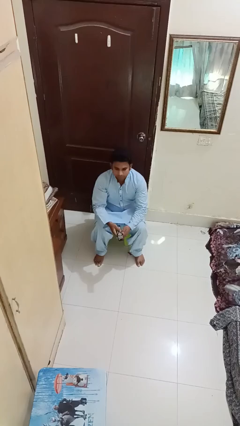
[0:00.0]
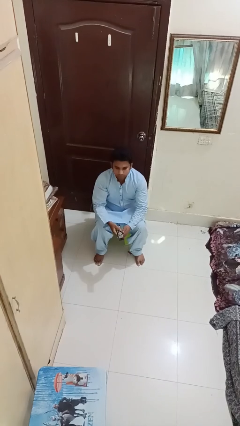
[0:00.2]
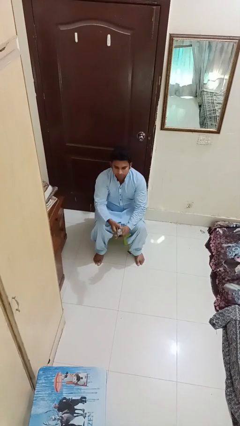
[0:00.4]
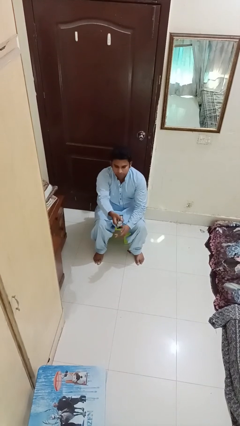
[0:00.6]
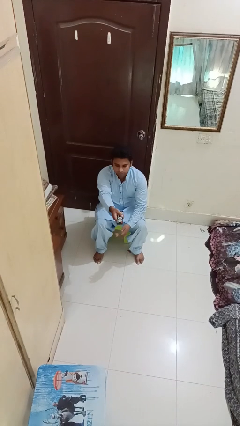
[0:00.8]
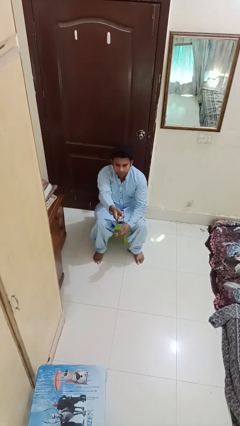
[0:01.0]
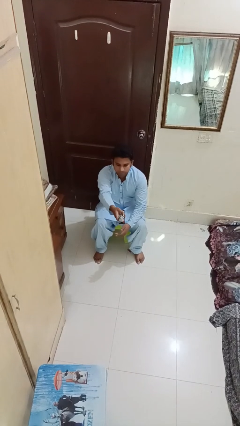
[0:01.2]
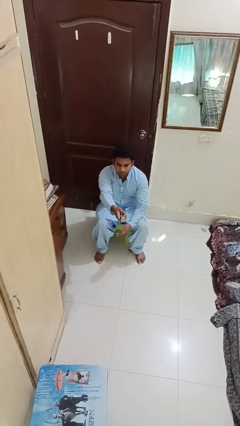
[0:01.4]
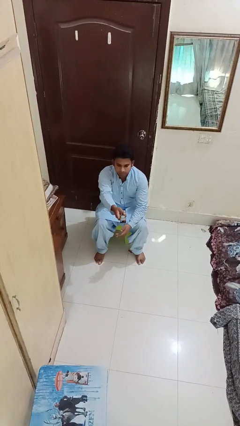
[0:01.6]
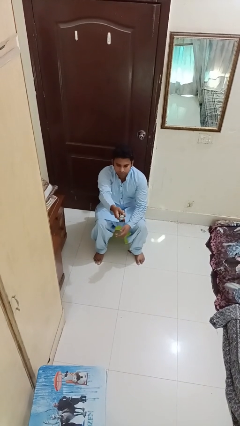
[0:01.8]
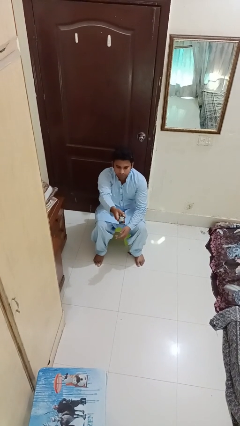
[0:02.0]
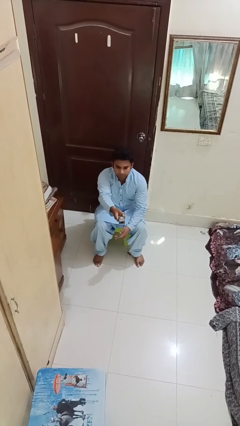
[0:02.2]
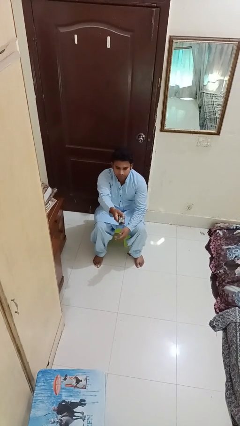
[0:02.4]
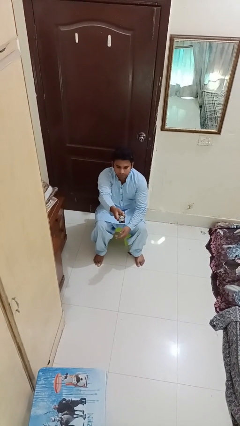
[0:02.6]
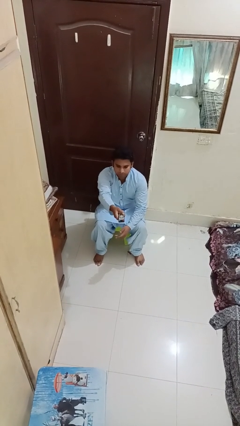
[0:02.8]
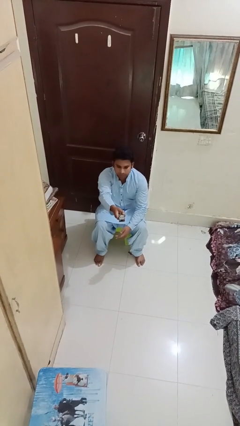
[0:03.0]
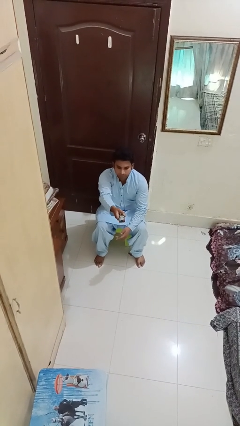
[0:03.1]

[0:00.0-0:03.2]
person uses television remote

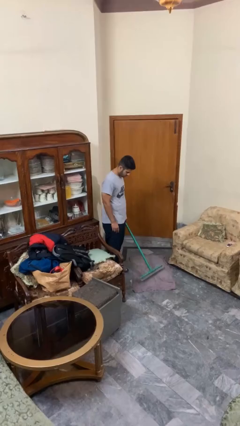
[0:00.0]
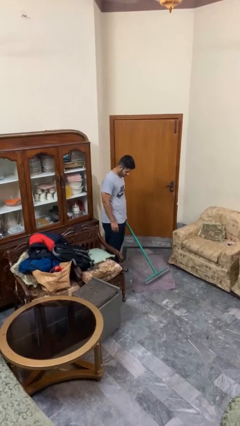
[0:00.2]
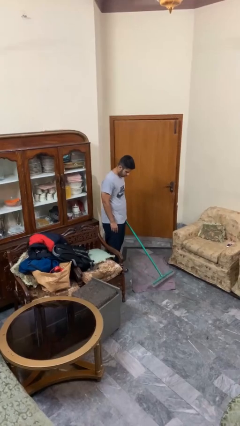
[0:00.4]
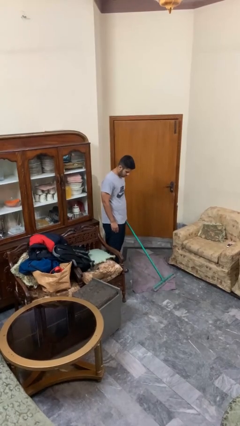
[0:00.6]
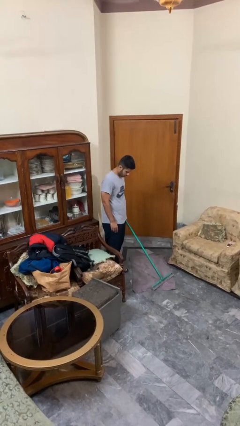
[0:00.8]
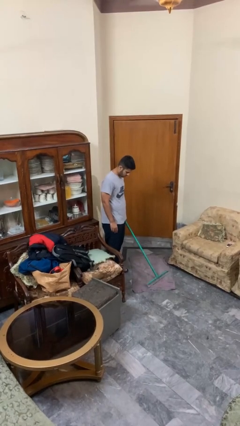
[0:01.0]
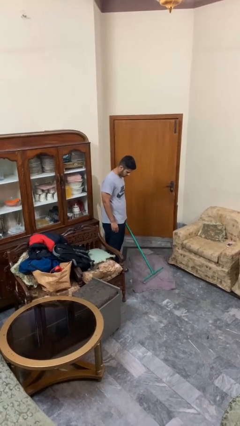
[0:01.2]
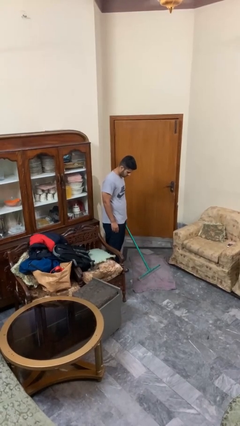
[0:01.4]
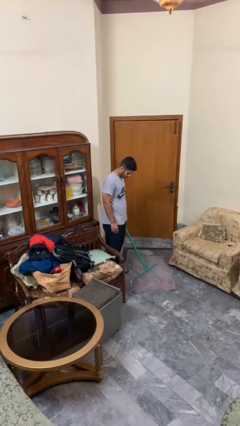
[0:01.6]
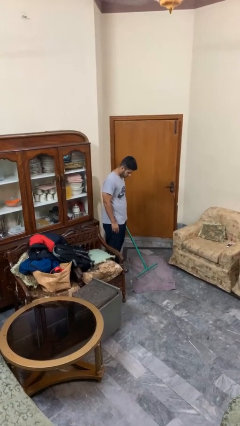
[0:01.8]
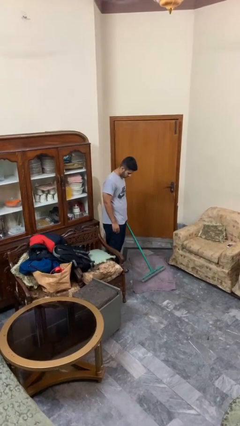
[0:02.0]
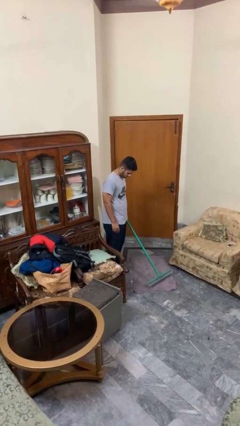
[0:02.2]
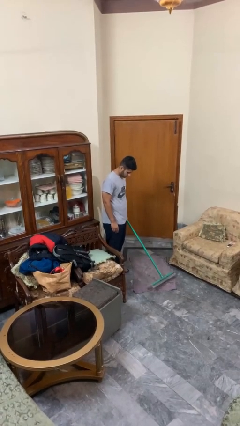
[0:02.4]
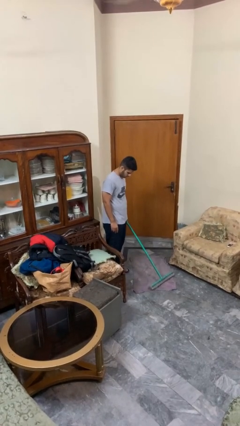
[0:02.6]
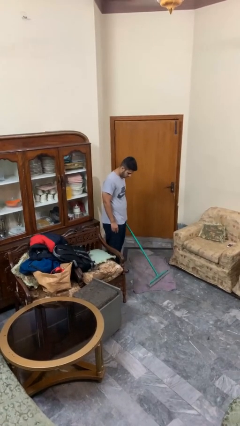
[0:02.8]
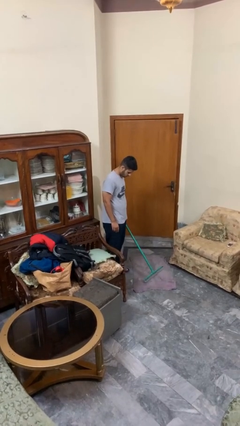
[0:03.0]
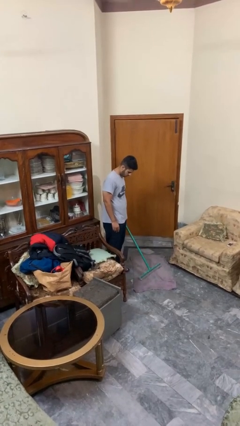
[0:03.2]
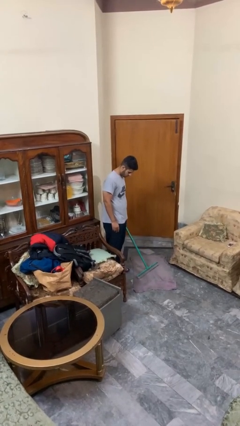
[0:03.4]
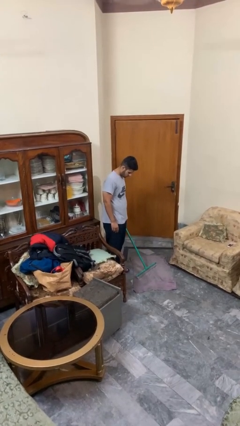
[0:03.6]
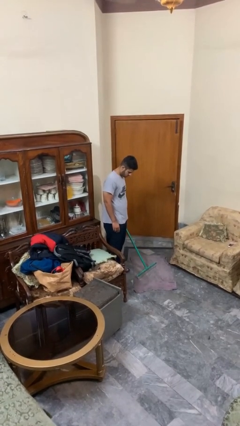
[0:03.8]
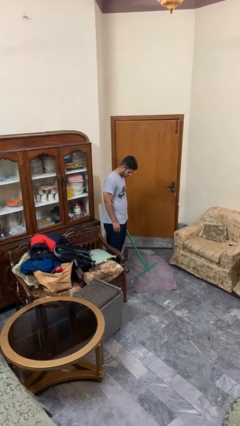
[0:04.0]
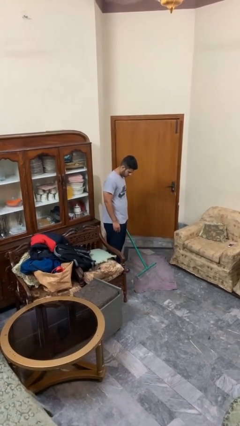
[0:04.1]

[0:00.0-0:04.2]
person vacuums carpet

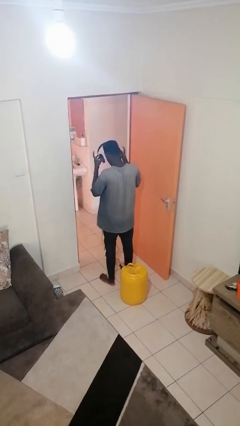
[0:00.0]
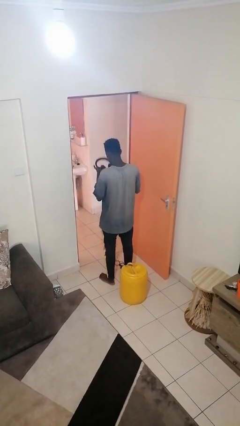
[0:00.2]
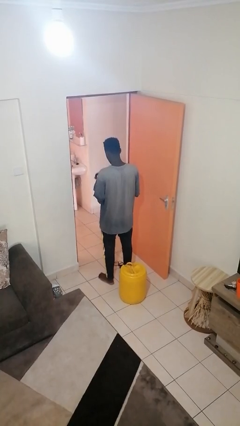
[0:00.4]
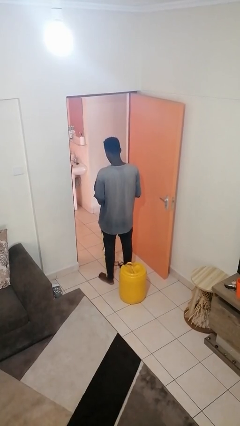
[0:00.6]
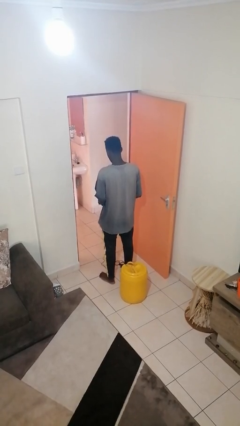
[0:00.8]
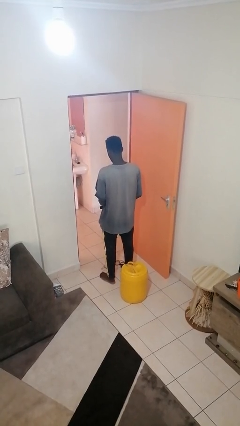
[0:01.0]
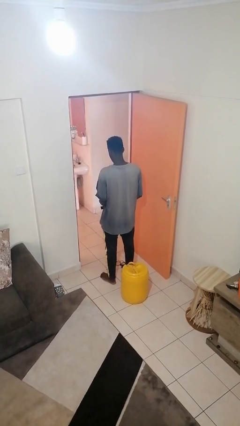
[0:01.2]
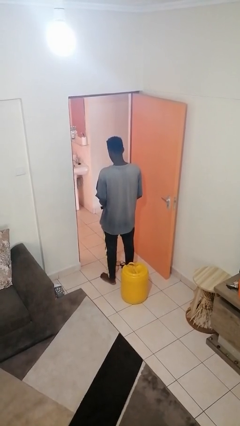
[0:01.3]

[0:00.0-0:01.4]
person takes off headphones

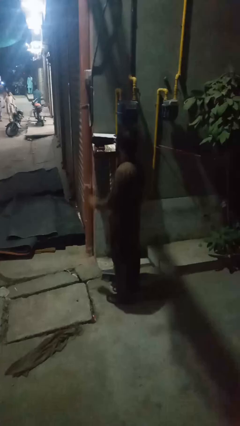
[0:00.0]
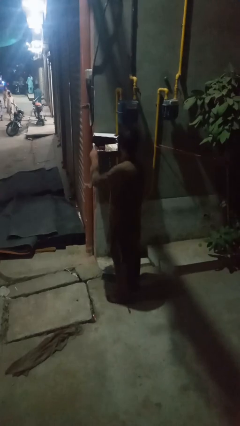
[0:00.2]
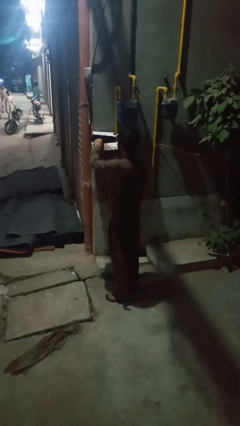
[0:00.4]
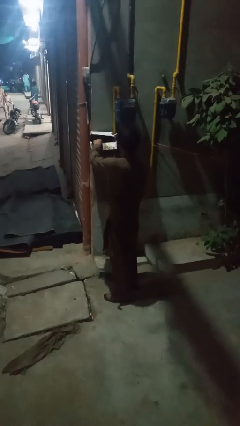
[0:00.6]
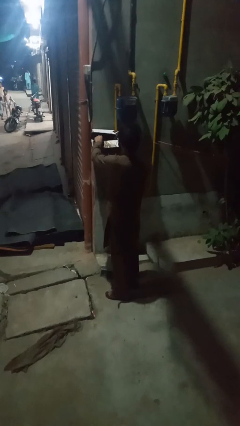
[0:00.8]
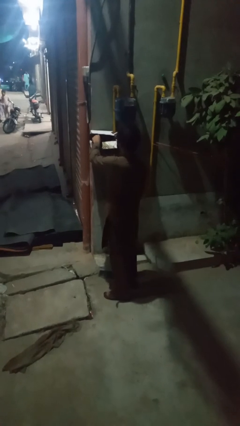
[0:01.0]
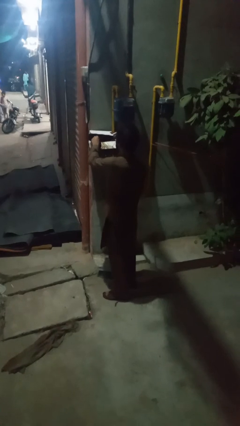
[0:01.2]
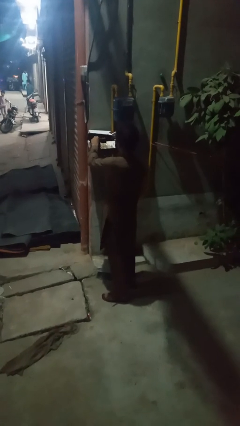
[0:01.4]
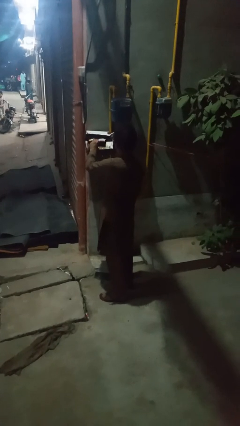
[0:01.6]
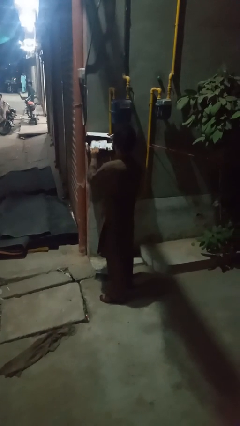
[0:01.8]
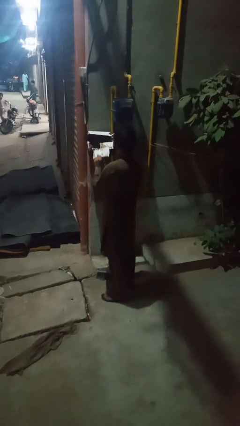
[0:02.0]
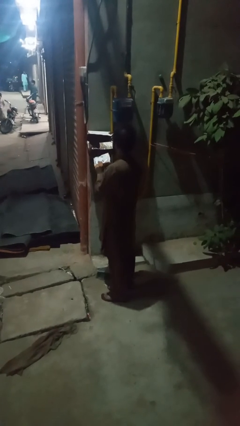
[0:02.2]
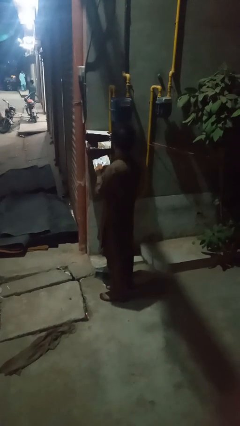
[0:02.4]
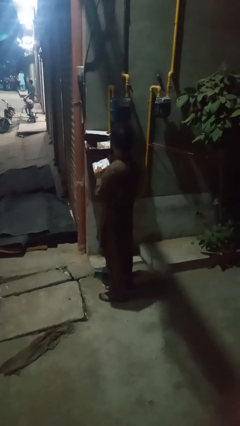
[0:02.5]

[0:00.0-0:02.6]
person puts letters in mailbox

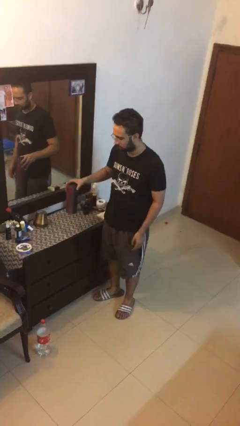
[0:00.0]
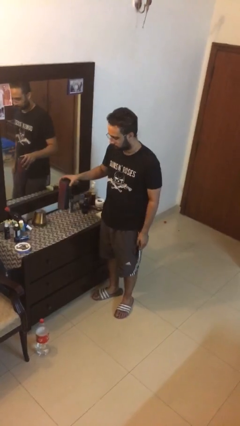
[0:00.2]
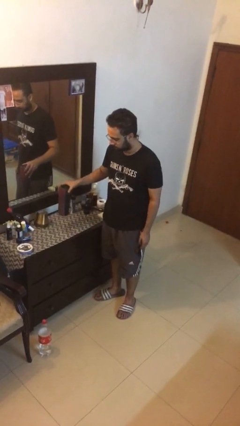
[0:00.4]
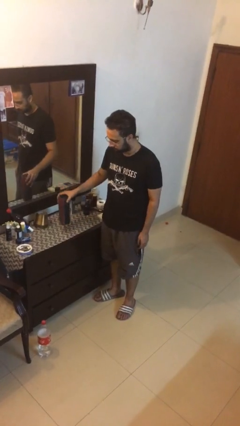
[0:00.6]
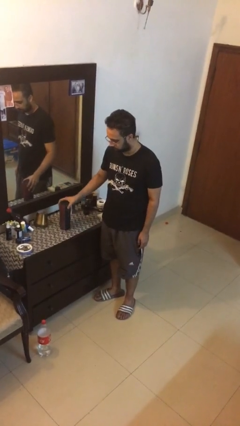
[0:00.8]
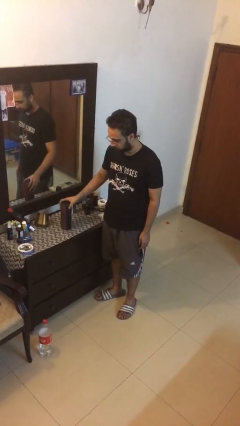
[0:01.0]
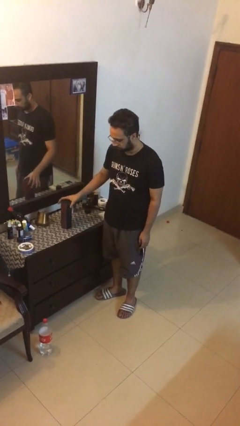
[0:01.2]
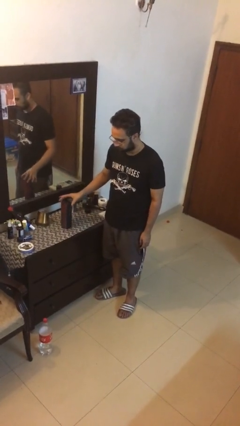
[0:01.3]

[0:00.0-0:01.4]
person puts down object on table

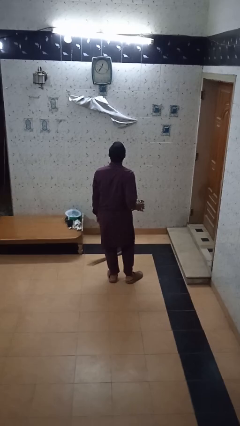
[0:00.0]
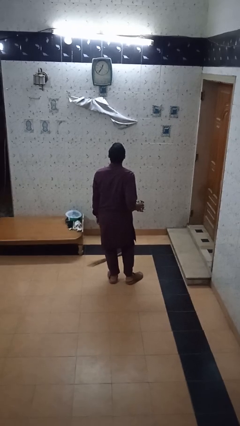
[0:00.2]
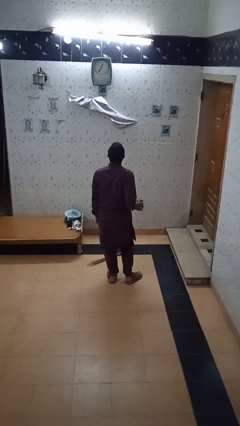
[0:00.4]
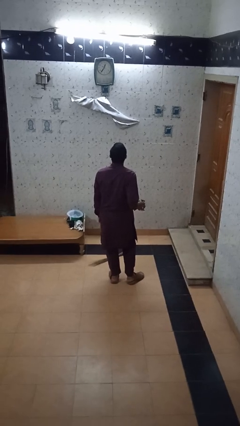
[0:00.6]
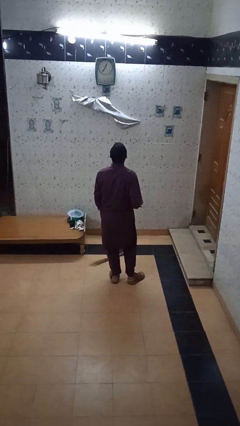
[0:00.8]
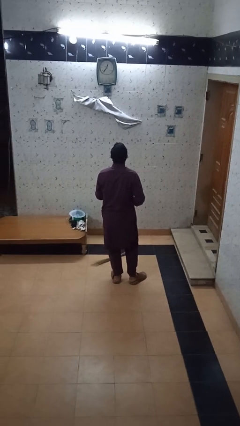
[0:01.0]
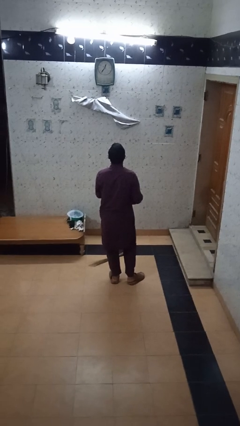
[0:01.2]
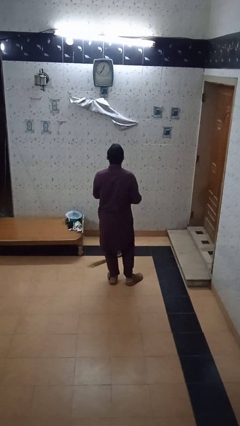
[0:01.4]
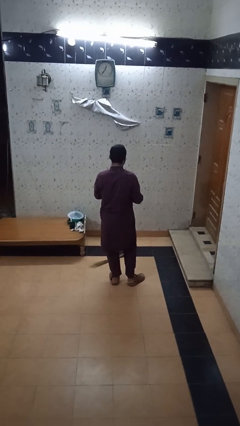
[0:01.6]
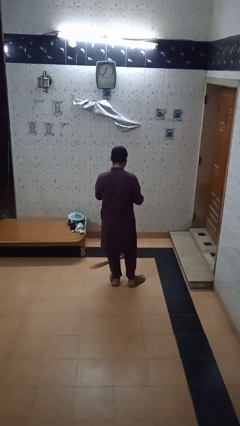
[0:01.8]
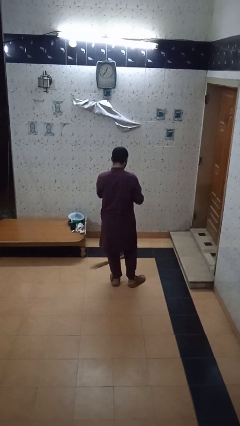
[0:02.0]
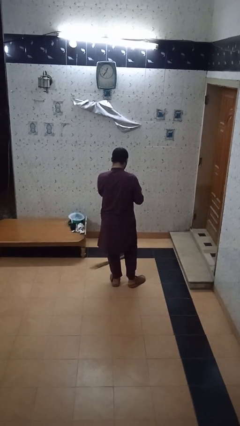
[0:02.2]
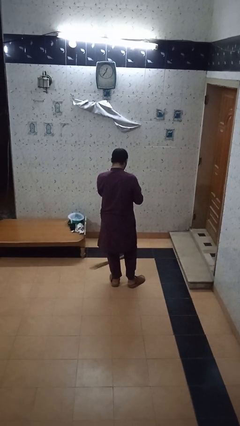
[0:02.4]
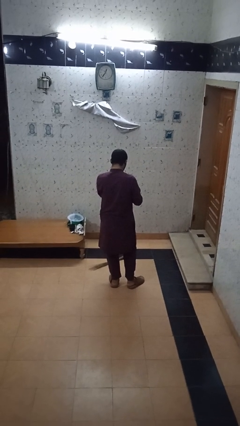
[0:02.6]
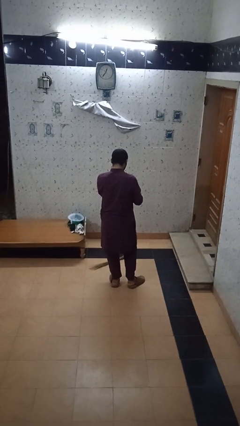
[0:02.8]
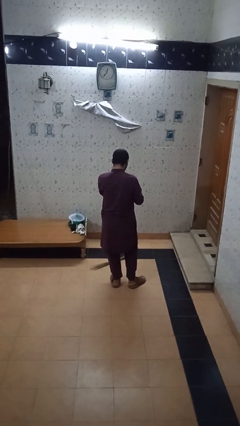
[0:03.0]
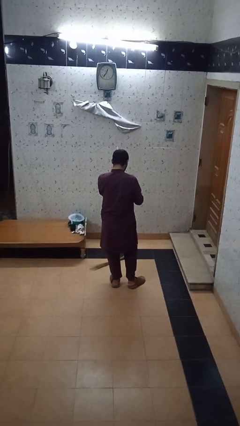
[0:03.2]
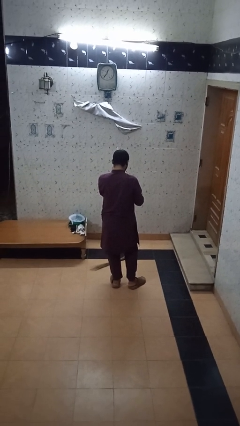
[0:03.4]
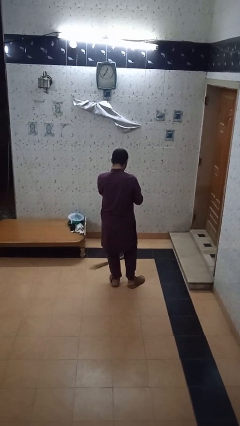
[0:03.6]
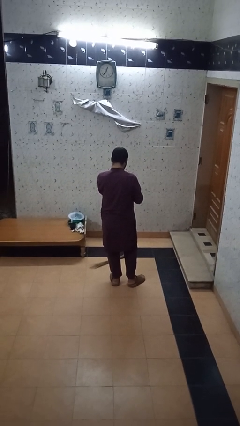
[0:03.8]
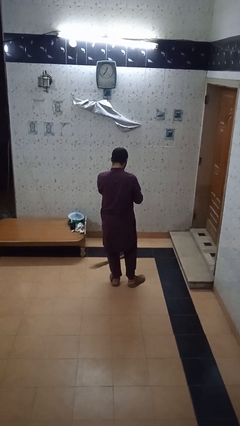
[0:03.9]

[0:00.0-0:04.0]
person drinks from straw

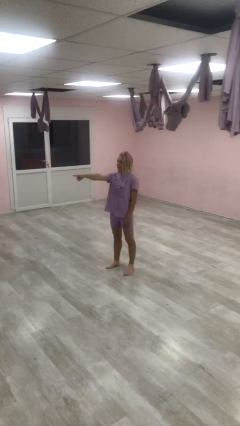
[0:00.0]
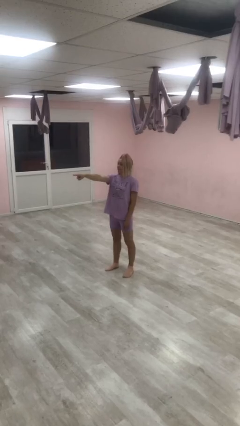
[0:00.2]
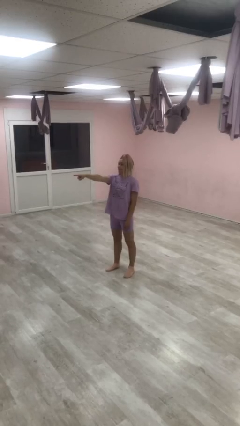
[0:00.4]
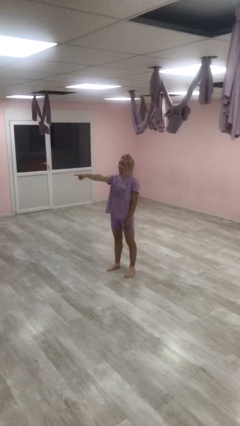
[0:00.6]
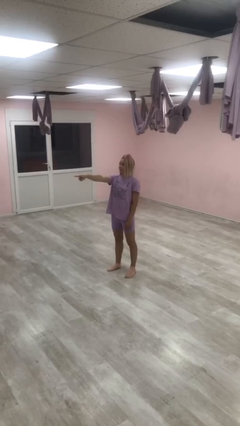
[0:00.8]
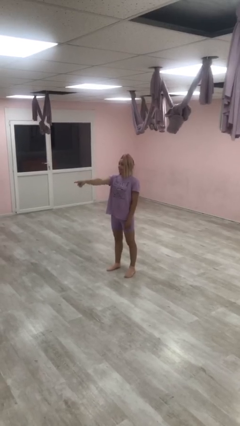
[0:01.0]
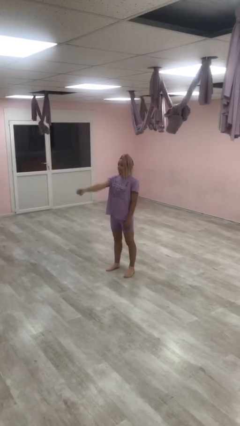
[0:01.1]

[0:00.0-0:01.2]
person points at person
